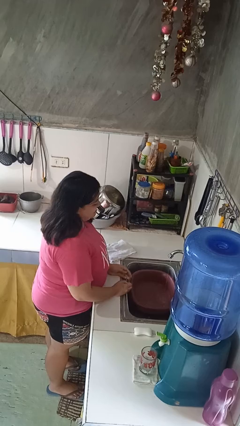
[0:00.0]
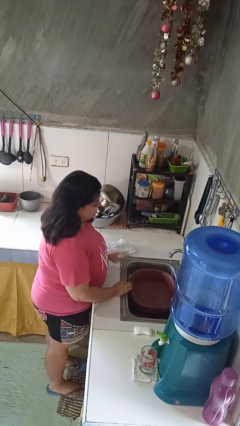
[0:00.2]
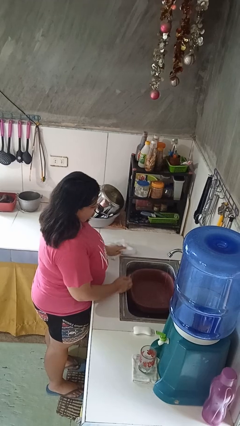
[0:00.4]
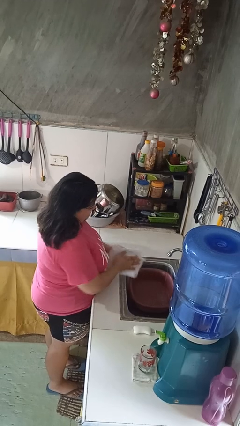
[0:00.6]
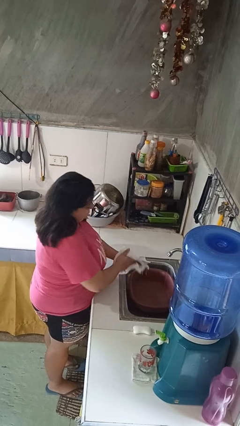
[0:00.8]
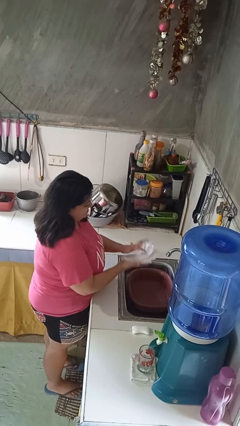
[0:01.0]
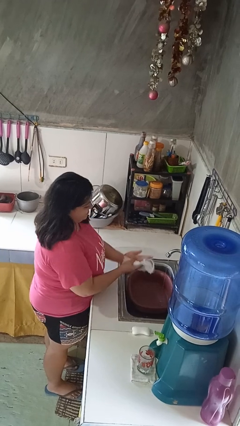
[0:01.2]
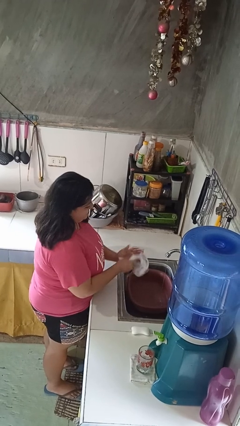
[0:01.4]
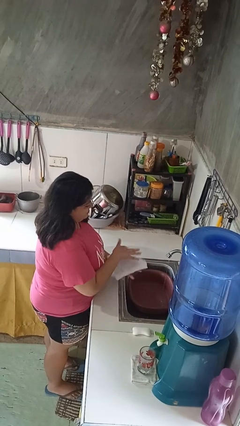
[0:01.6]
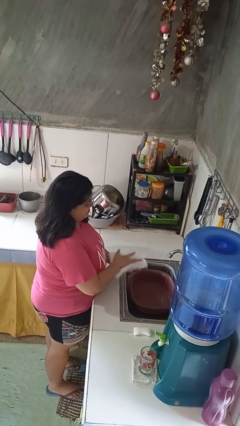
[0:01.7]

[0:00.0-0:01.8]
person dries hands with towel

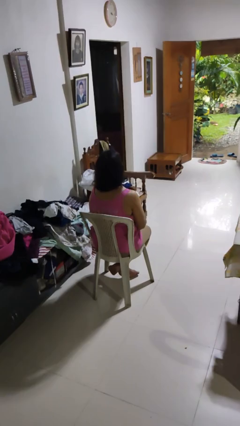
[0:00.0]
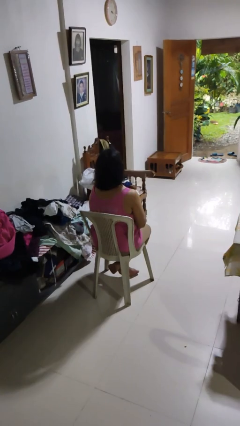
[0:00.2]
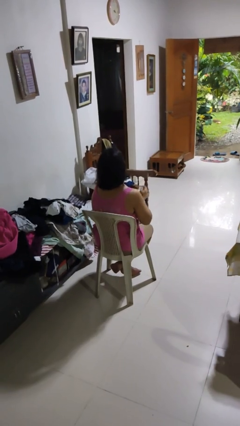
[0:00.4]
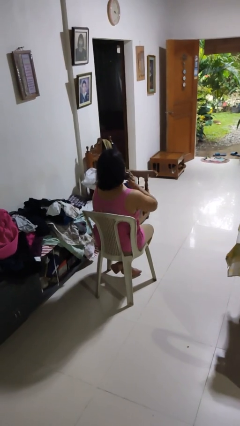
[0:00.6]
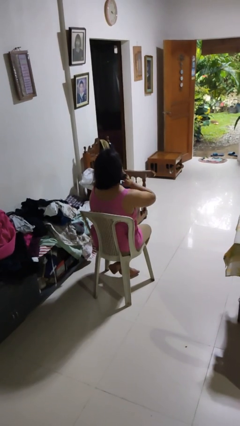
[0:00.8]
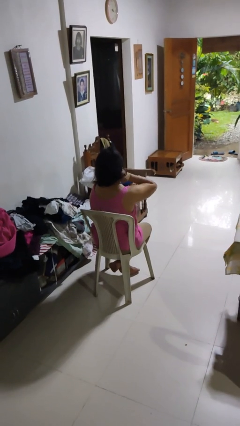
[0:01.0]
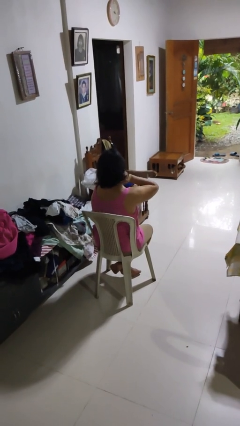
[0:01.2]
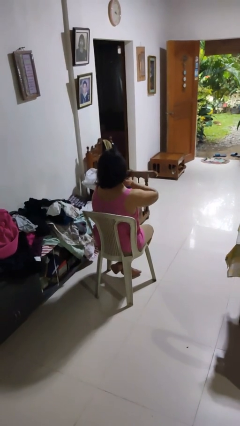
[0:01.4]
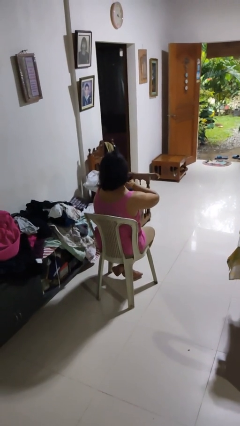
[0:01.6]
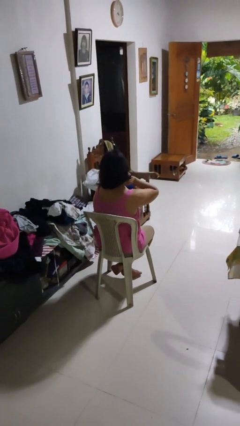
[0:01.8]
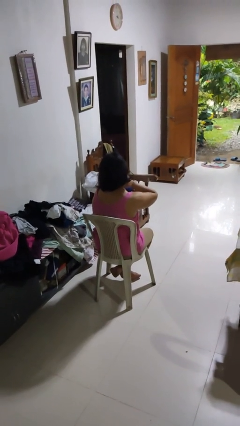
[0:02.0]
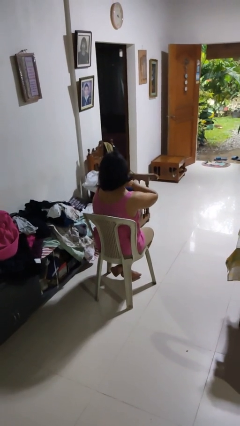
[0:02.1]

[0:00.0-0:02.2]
person rubs neck

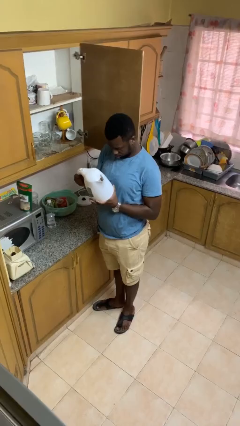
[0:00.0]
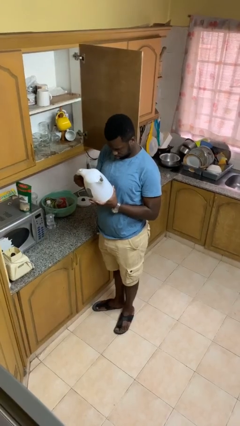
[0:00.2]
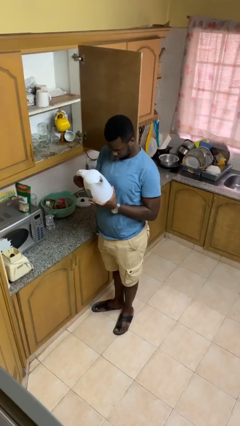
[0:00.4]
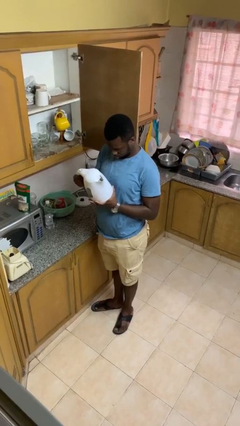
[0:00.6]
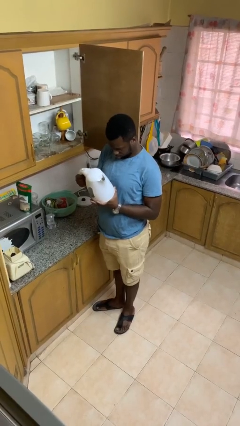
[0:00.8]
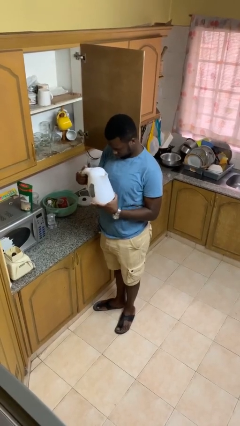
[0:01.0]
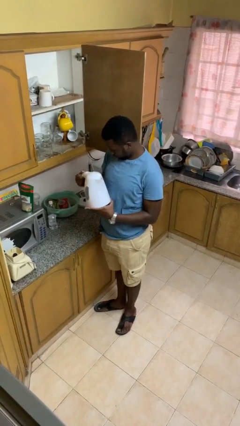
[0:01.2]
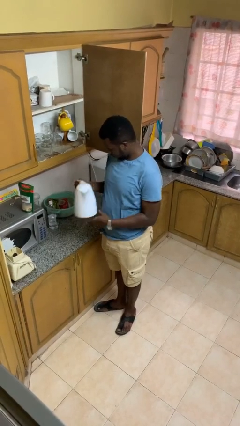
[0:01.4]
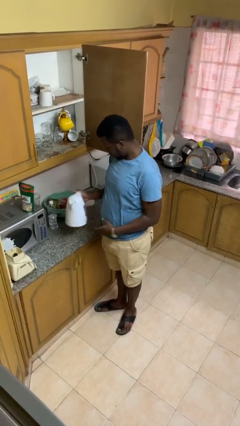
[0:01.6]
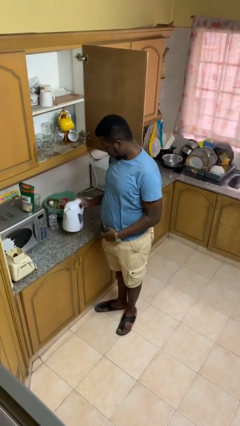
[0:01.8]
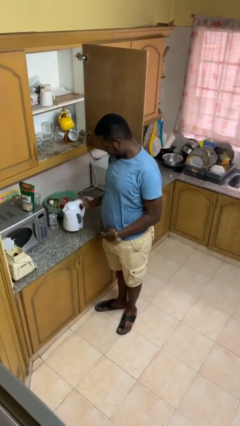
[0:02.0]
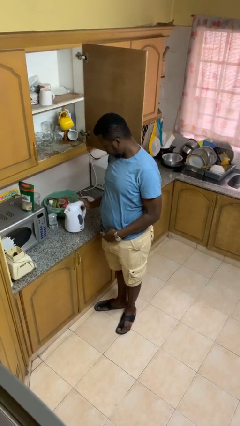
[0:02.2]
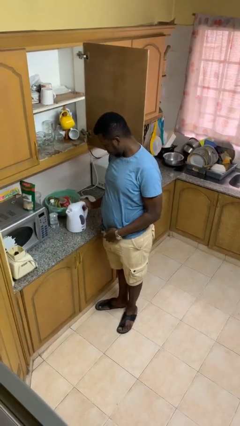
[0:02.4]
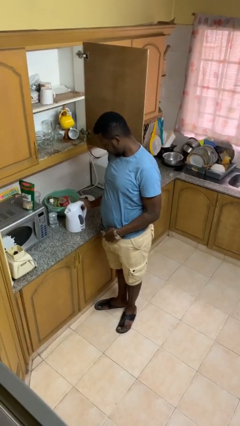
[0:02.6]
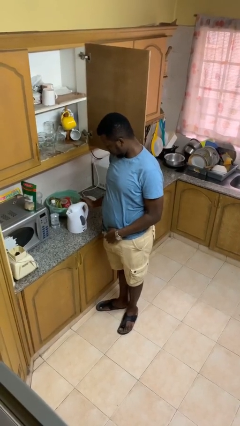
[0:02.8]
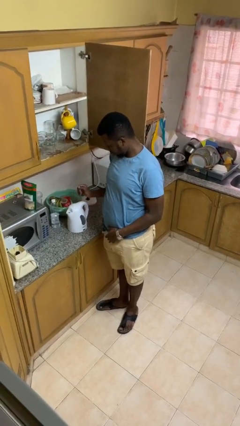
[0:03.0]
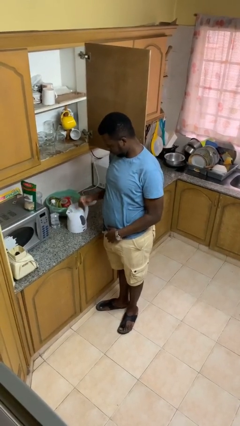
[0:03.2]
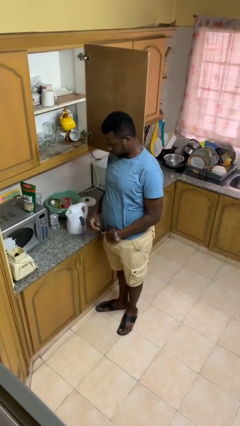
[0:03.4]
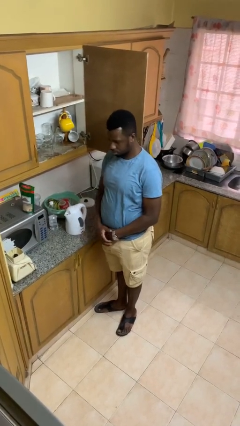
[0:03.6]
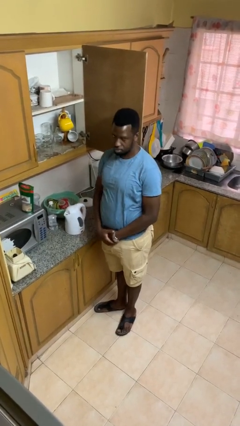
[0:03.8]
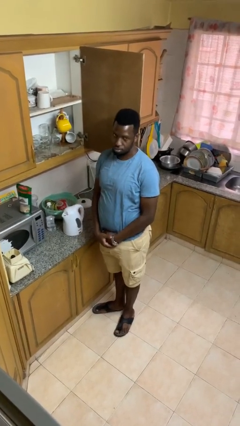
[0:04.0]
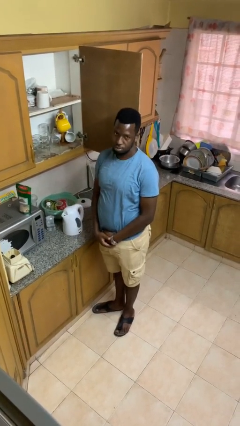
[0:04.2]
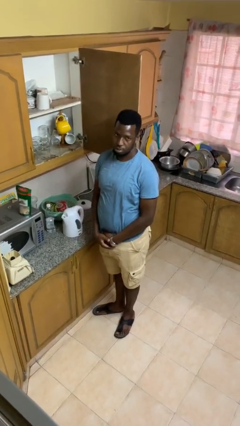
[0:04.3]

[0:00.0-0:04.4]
person puts down object on table

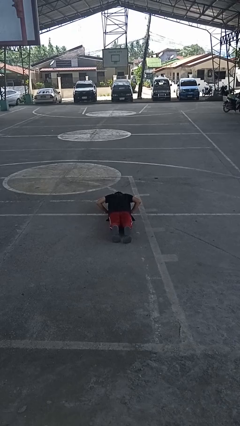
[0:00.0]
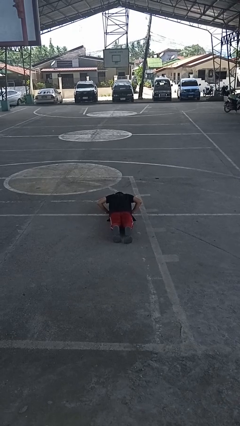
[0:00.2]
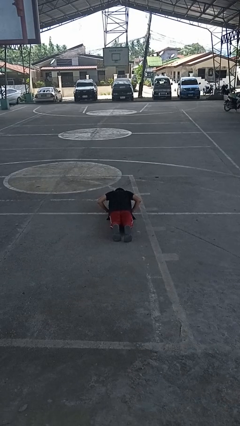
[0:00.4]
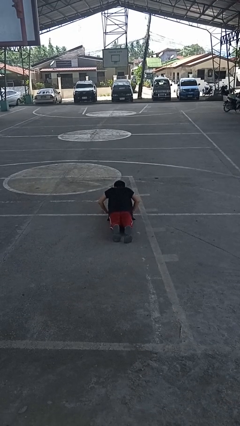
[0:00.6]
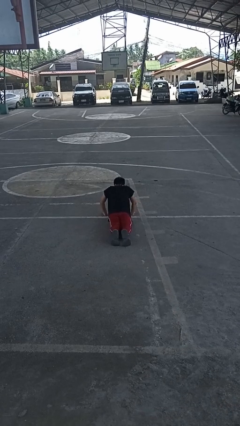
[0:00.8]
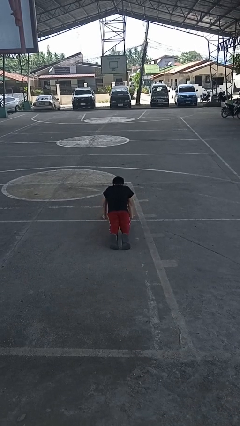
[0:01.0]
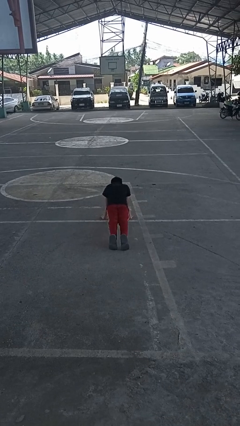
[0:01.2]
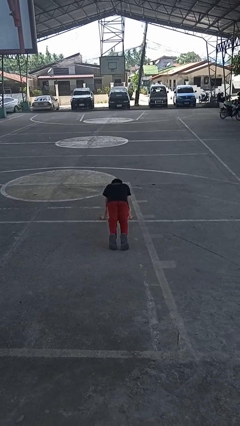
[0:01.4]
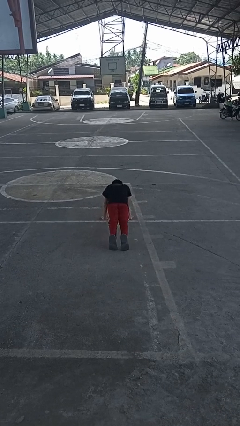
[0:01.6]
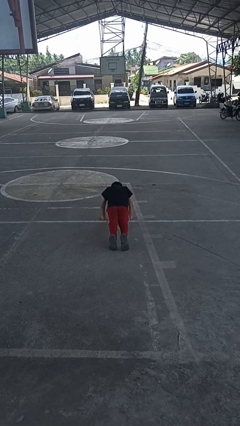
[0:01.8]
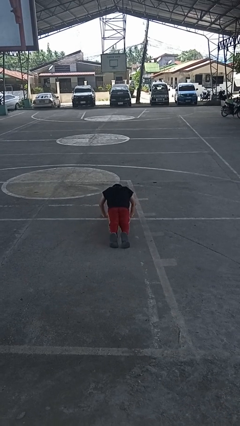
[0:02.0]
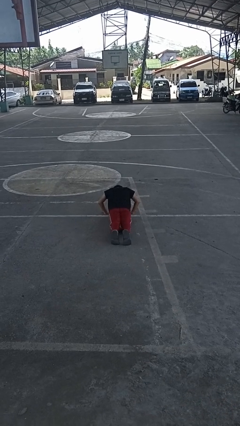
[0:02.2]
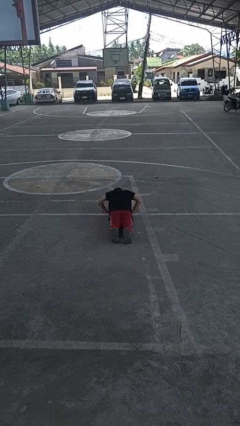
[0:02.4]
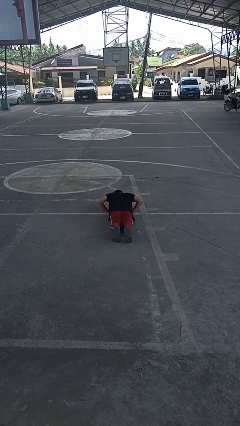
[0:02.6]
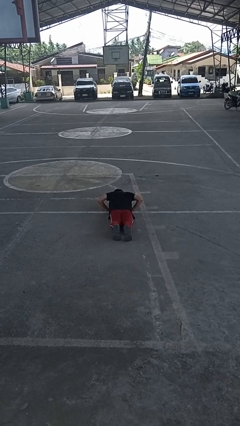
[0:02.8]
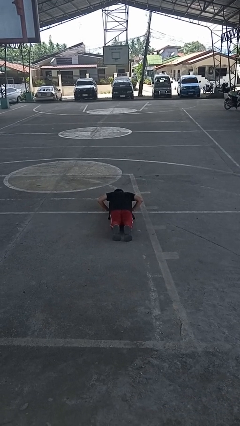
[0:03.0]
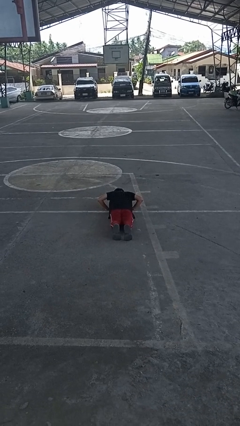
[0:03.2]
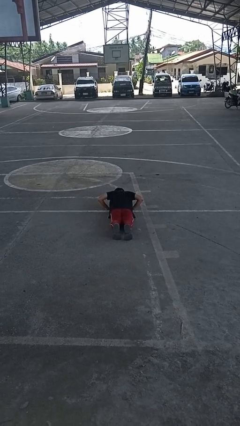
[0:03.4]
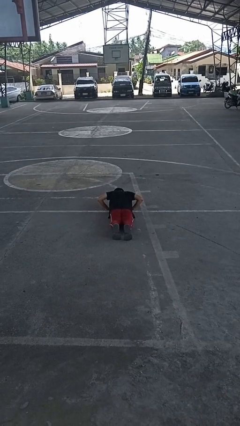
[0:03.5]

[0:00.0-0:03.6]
person exercises with pushup

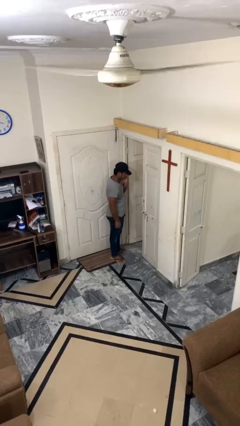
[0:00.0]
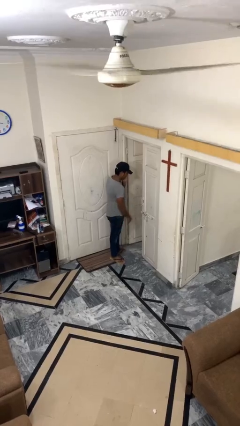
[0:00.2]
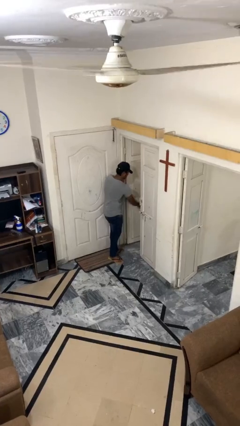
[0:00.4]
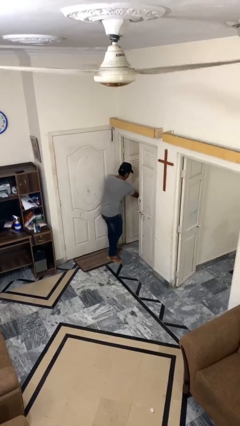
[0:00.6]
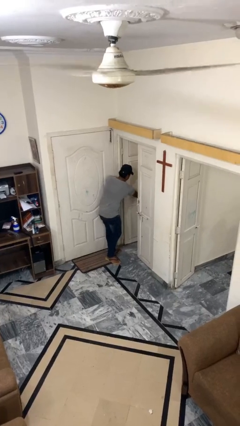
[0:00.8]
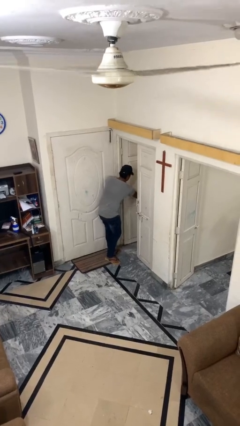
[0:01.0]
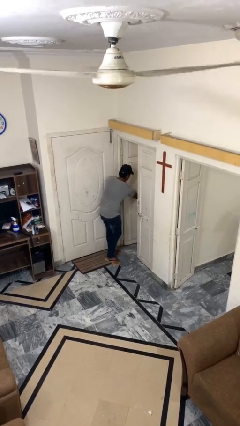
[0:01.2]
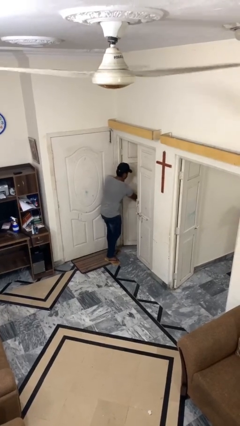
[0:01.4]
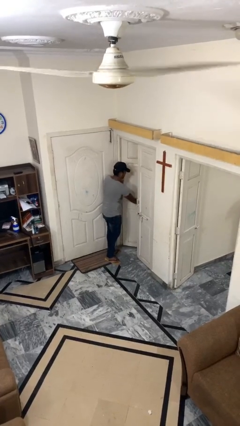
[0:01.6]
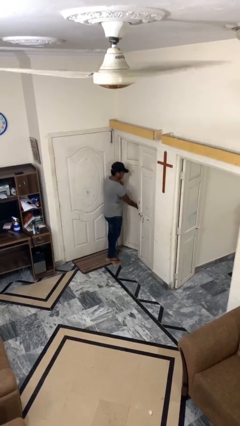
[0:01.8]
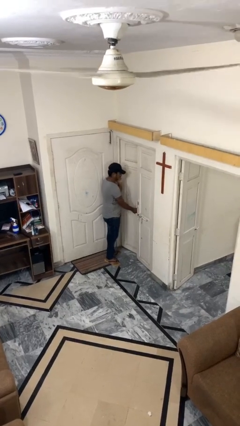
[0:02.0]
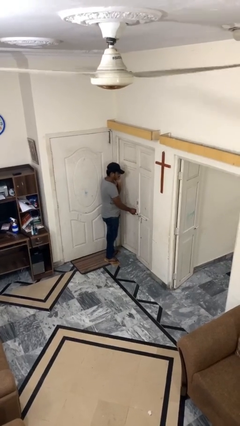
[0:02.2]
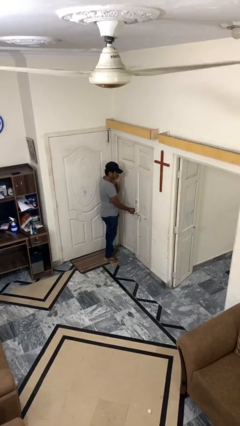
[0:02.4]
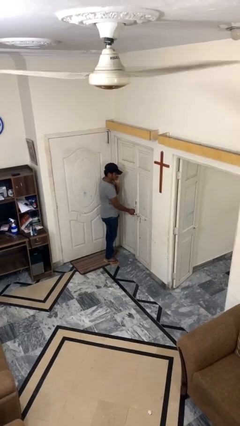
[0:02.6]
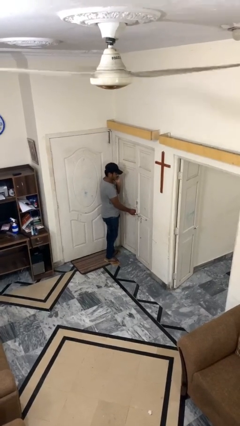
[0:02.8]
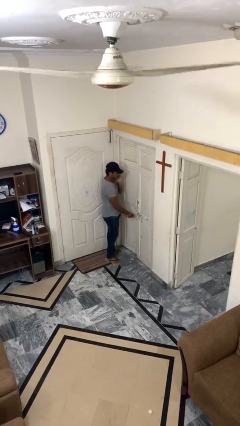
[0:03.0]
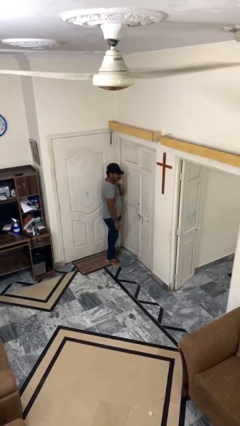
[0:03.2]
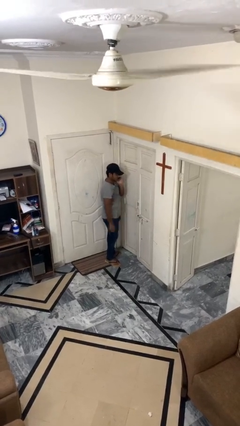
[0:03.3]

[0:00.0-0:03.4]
person closes facility door

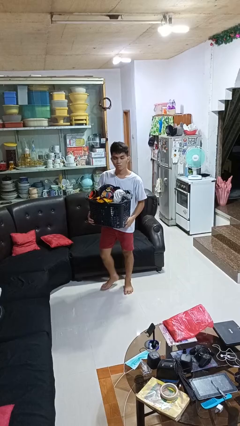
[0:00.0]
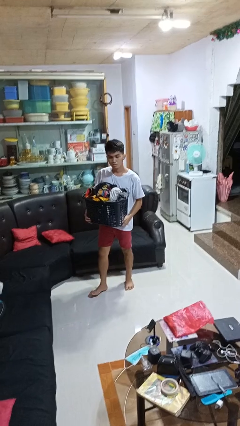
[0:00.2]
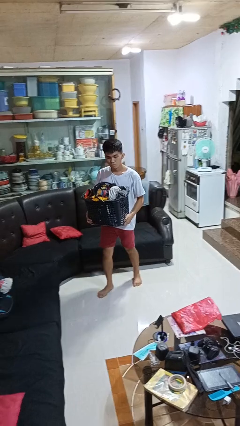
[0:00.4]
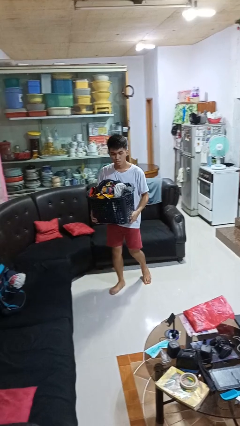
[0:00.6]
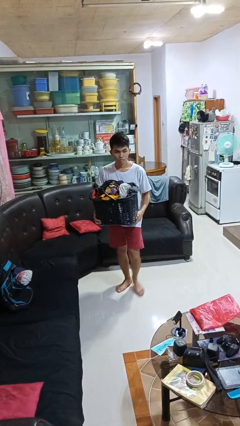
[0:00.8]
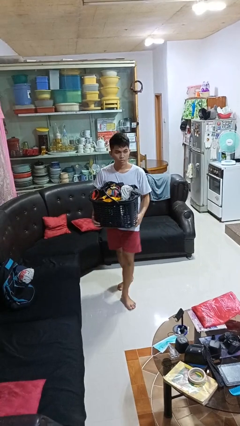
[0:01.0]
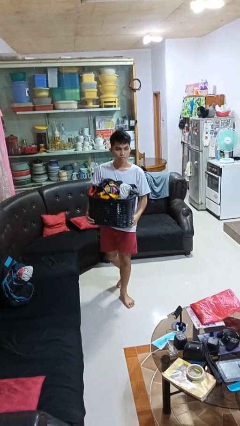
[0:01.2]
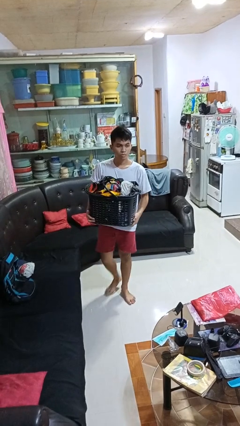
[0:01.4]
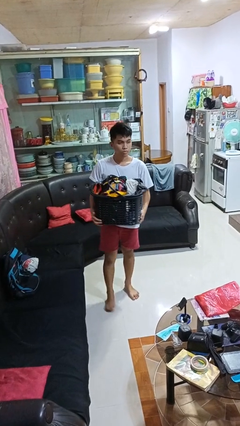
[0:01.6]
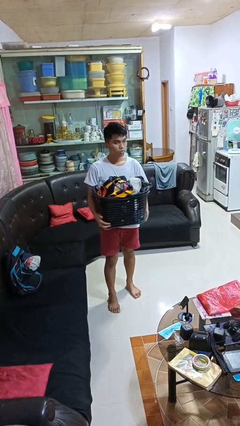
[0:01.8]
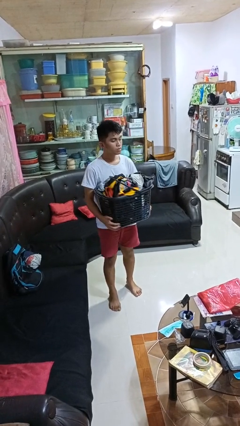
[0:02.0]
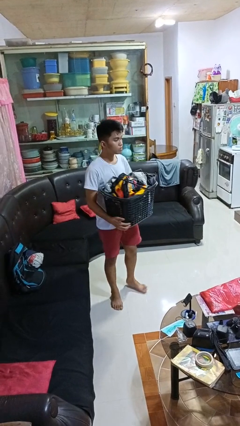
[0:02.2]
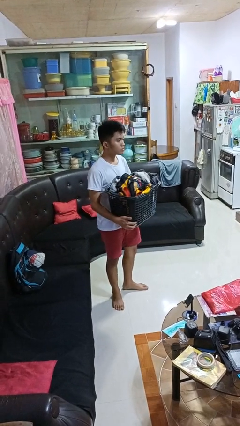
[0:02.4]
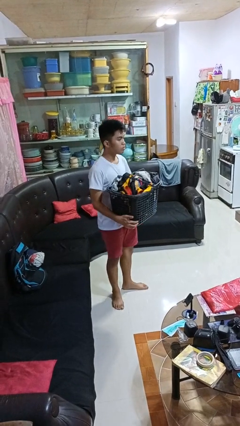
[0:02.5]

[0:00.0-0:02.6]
person carries laundry basket
